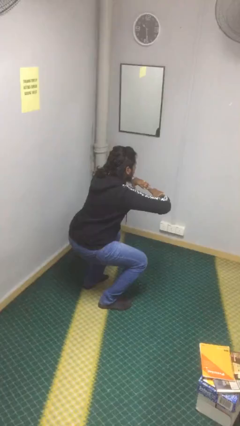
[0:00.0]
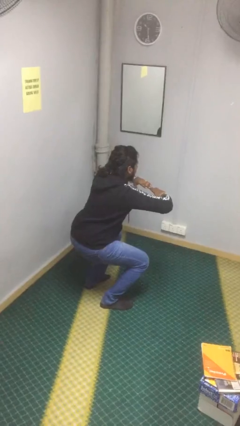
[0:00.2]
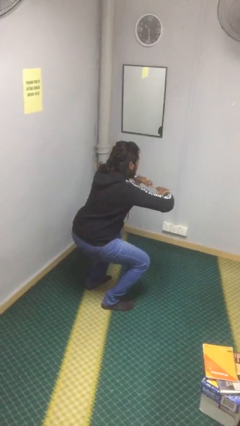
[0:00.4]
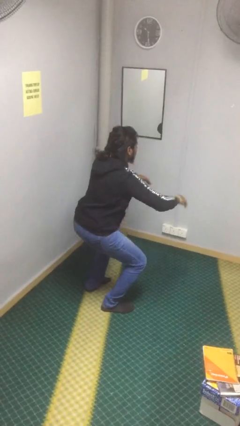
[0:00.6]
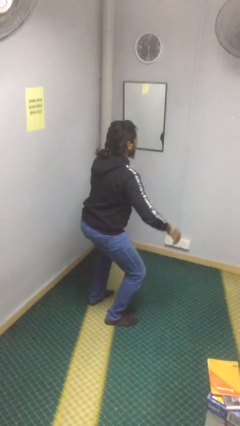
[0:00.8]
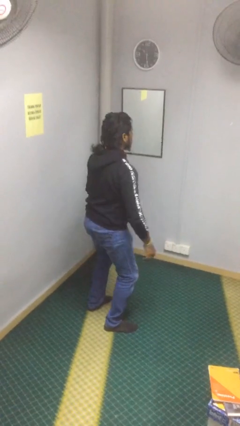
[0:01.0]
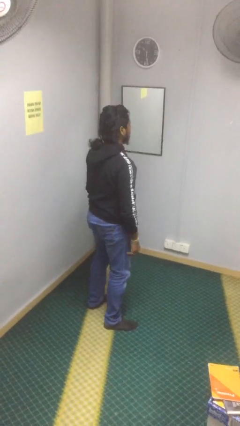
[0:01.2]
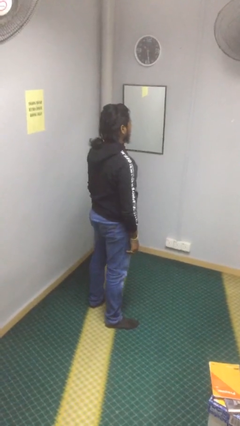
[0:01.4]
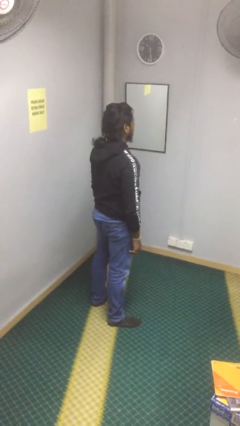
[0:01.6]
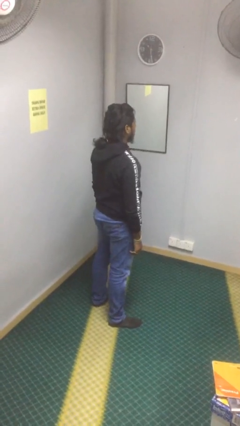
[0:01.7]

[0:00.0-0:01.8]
person stands up

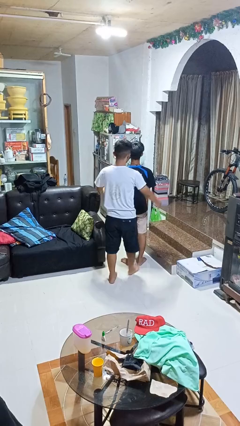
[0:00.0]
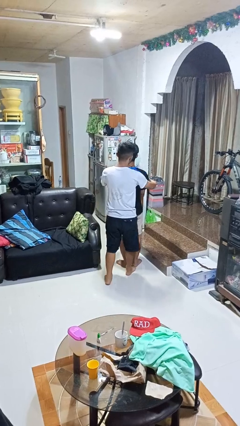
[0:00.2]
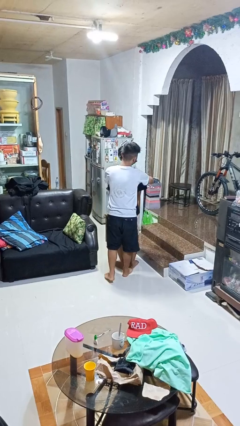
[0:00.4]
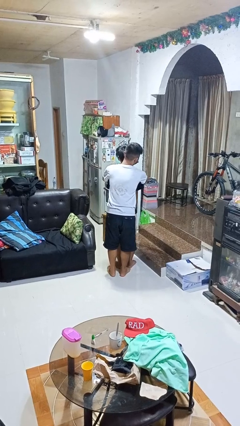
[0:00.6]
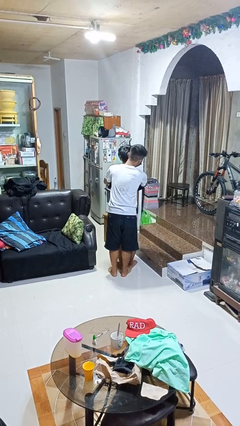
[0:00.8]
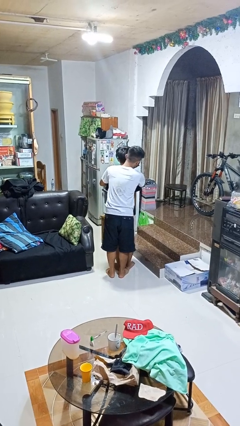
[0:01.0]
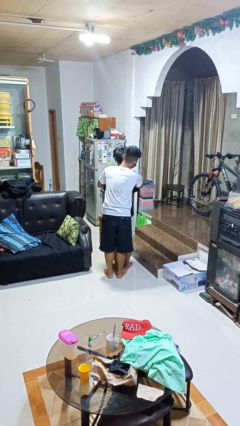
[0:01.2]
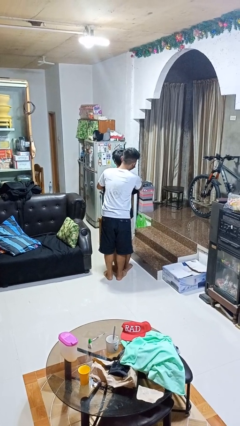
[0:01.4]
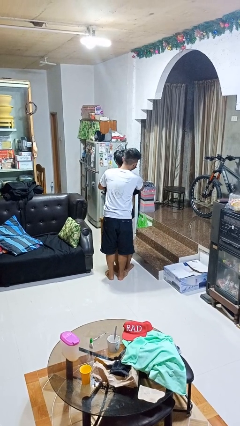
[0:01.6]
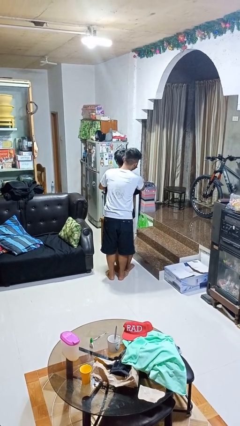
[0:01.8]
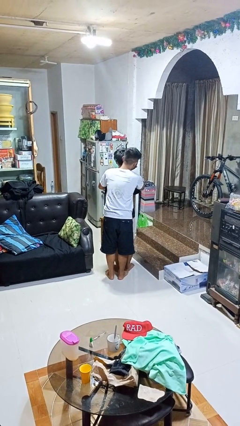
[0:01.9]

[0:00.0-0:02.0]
person hugs person from behind

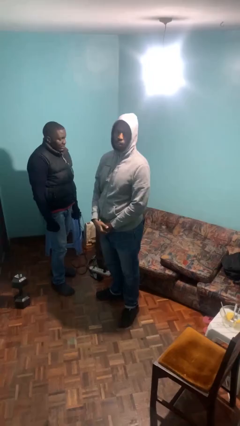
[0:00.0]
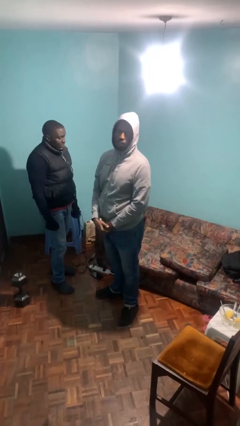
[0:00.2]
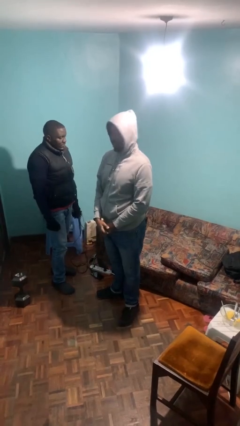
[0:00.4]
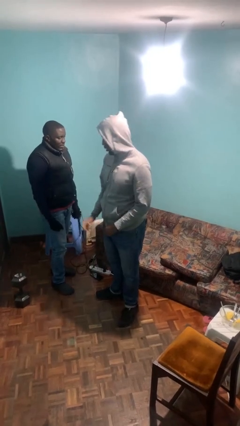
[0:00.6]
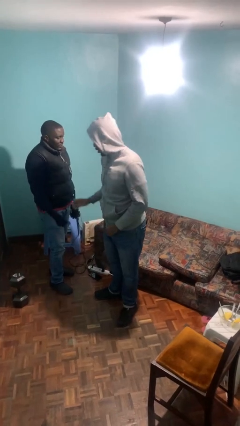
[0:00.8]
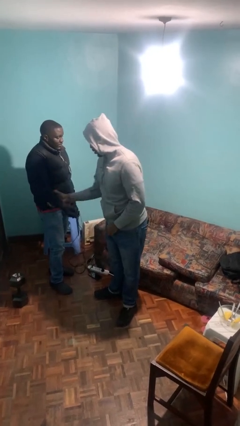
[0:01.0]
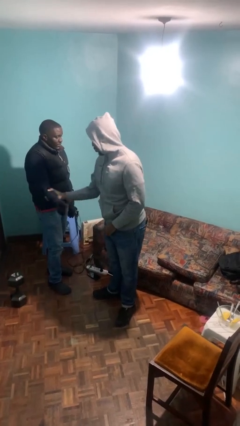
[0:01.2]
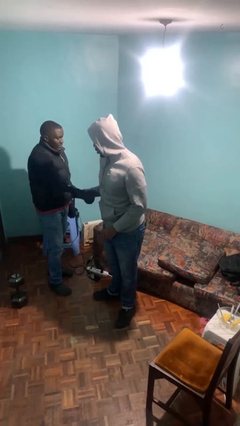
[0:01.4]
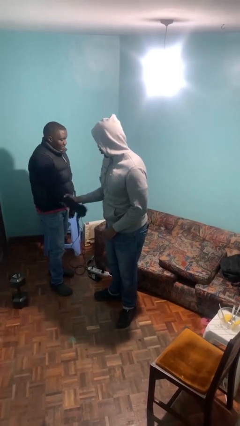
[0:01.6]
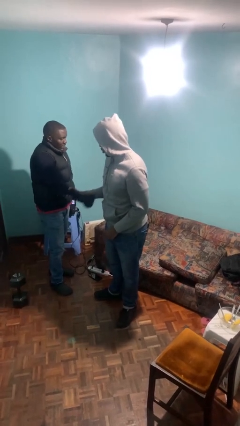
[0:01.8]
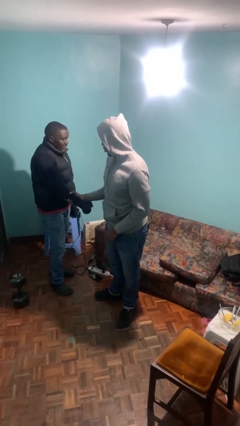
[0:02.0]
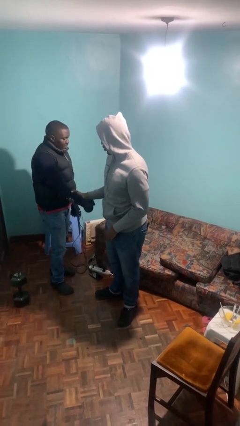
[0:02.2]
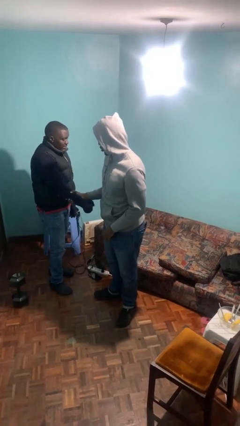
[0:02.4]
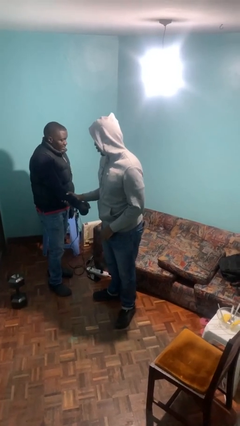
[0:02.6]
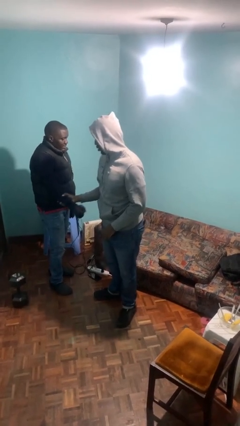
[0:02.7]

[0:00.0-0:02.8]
person grabs person by forearm

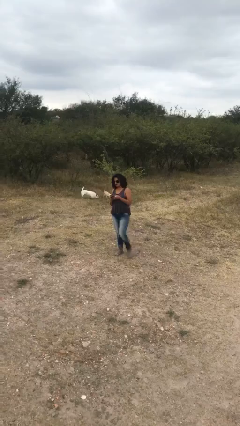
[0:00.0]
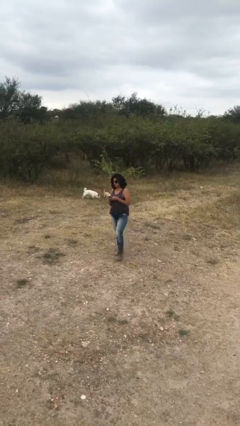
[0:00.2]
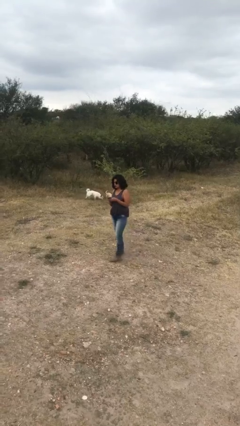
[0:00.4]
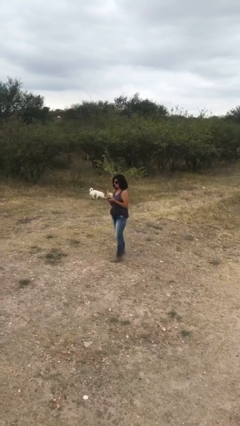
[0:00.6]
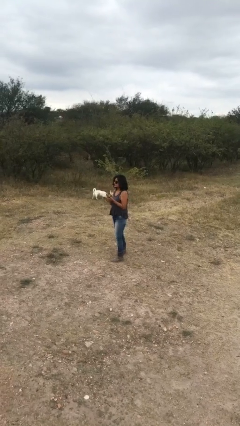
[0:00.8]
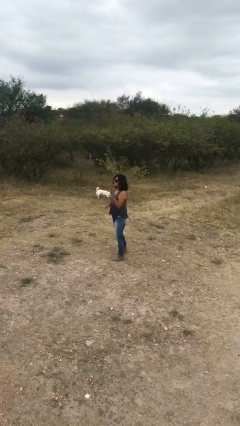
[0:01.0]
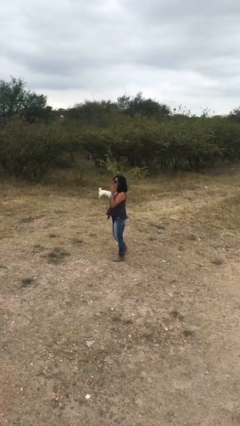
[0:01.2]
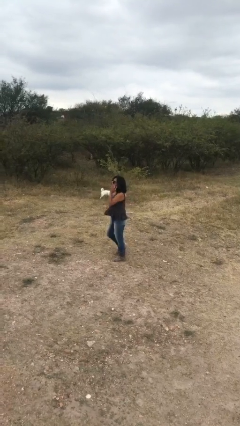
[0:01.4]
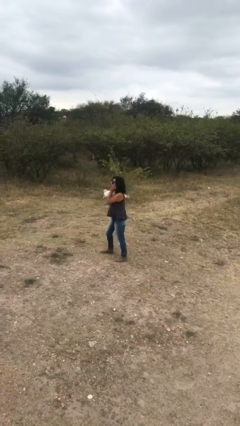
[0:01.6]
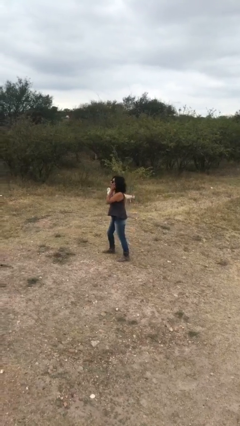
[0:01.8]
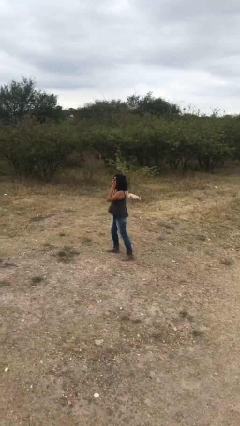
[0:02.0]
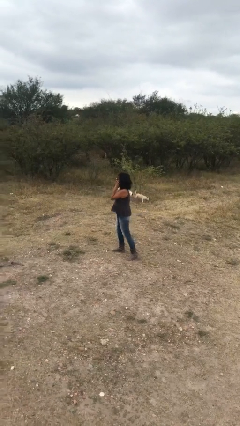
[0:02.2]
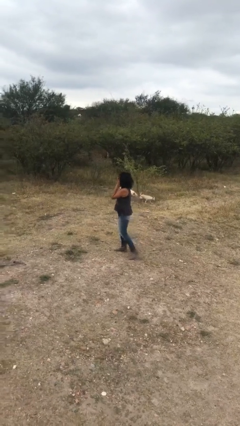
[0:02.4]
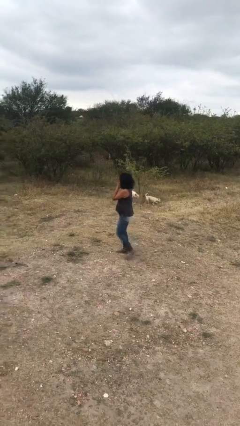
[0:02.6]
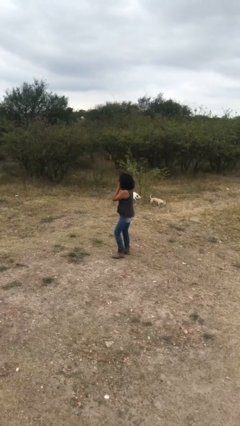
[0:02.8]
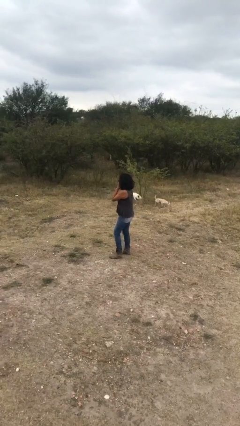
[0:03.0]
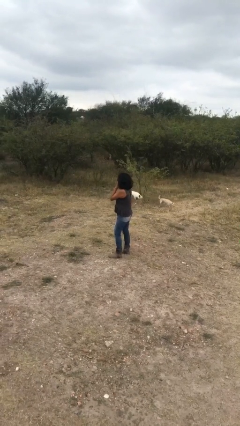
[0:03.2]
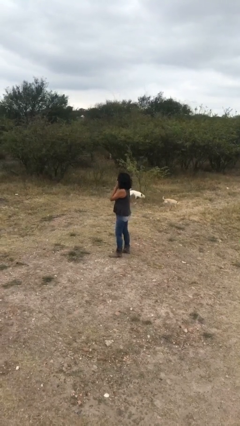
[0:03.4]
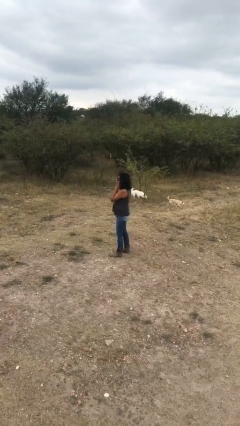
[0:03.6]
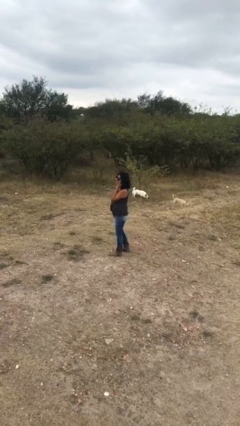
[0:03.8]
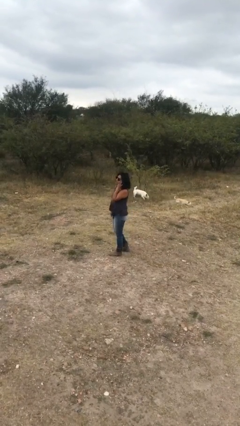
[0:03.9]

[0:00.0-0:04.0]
person talks on phone

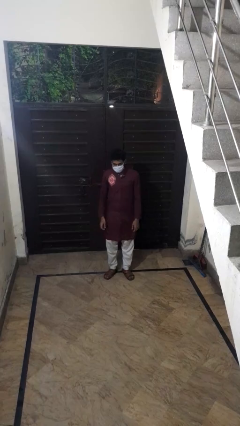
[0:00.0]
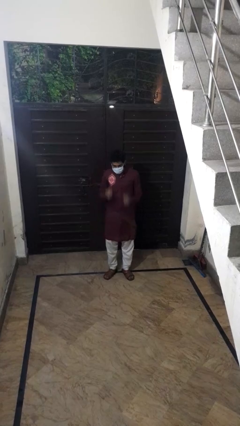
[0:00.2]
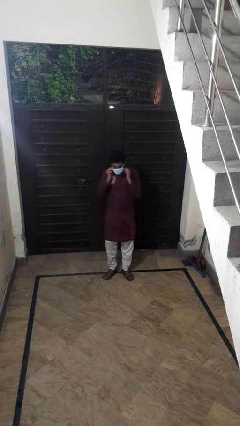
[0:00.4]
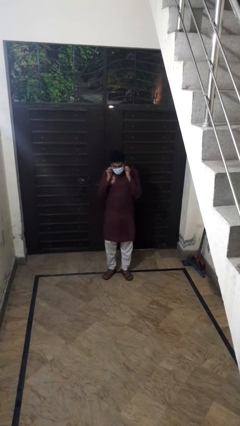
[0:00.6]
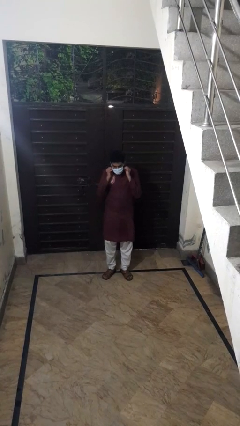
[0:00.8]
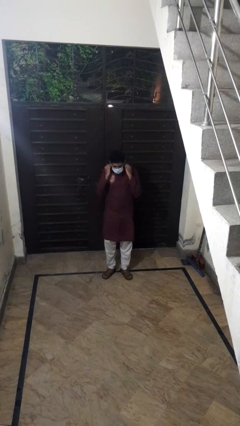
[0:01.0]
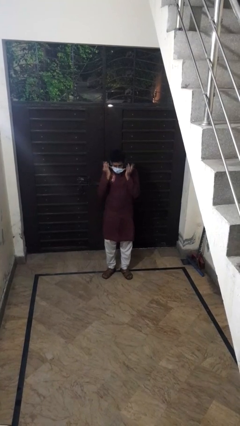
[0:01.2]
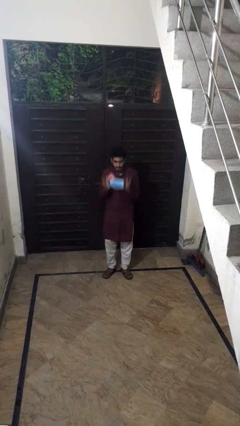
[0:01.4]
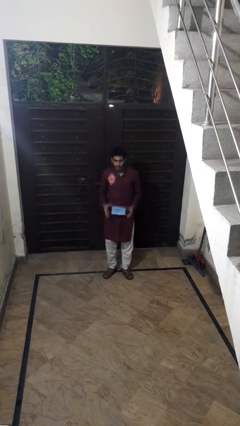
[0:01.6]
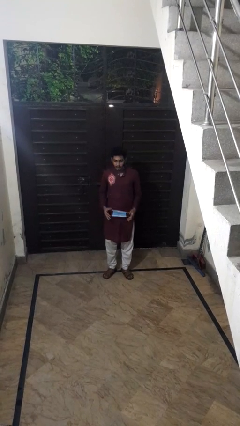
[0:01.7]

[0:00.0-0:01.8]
person takes off facemask

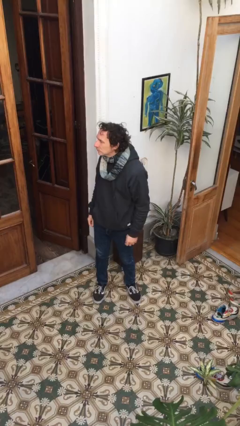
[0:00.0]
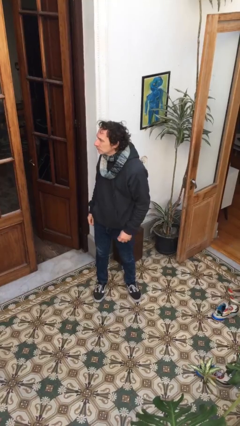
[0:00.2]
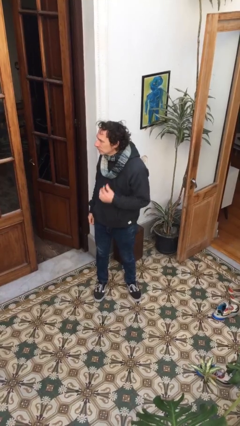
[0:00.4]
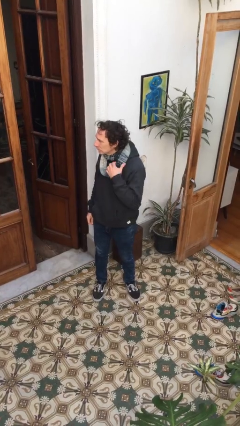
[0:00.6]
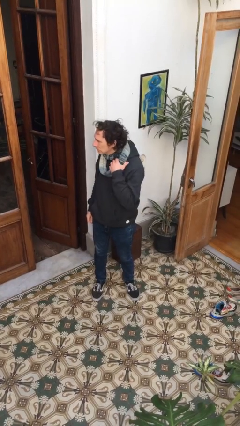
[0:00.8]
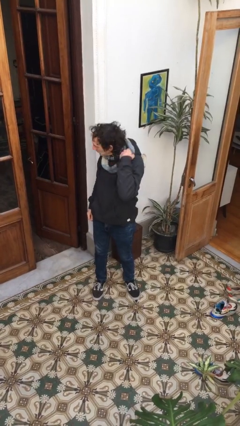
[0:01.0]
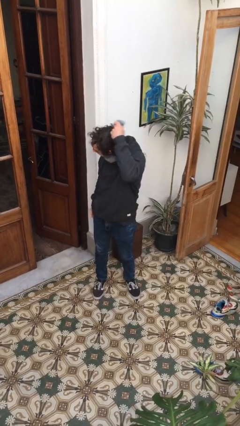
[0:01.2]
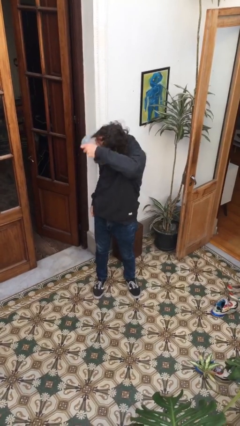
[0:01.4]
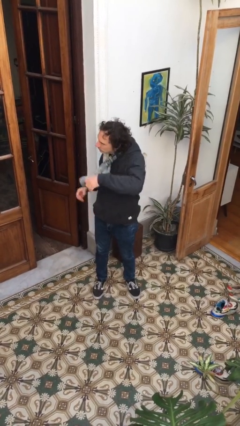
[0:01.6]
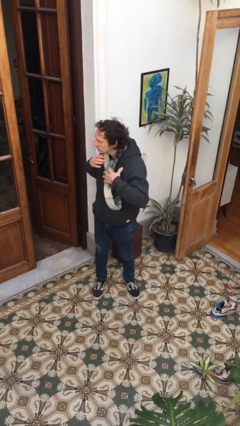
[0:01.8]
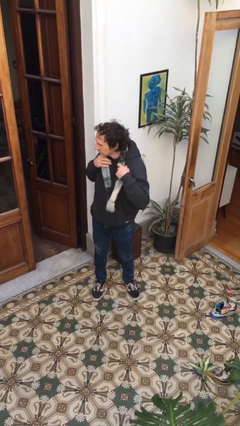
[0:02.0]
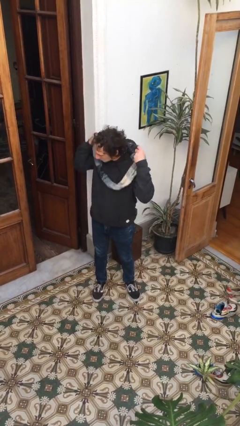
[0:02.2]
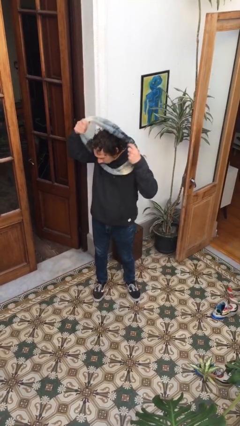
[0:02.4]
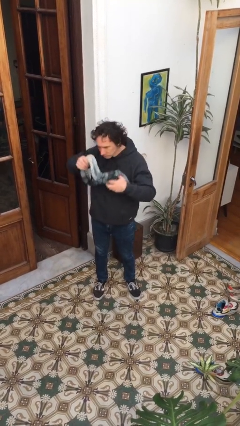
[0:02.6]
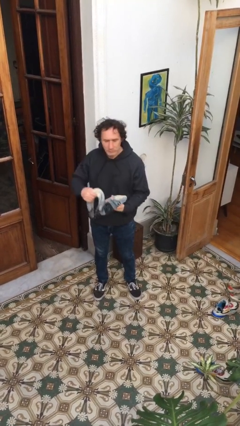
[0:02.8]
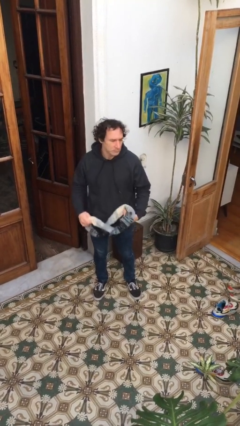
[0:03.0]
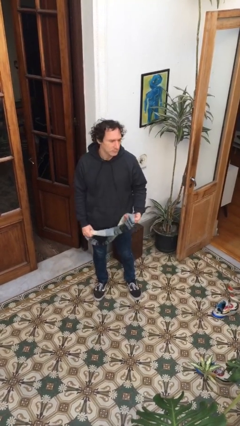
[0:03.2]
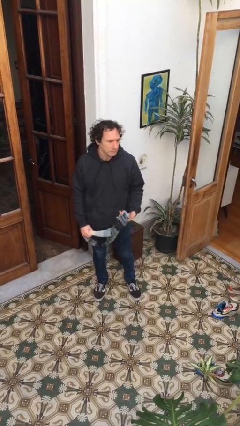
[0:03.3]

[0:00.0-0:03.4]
person takes off scarf

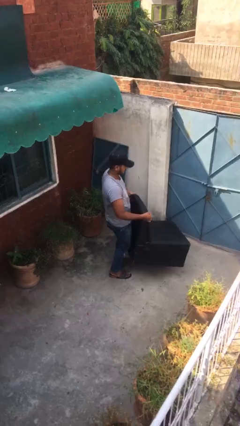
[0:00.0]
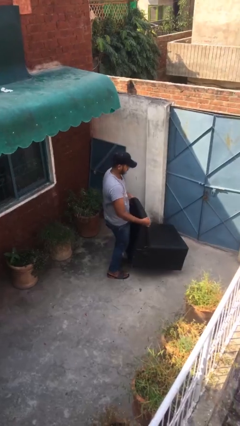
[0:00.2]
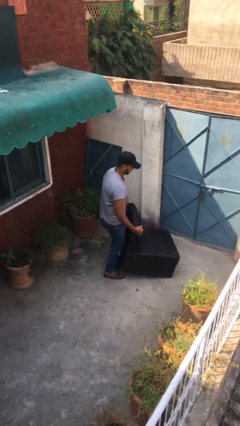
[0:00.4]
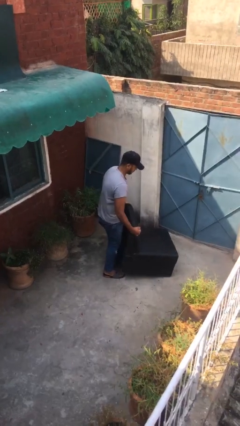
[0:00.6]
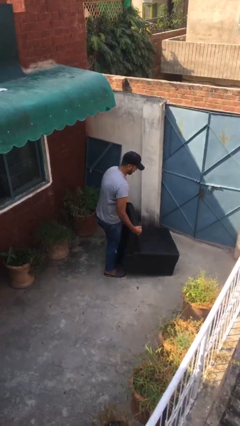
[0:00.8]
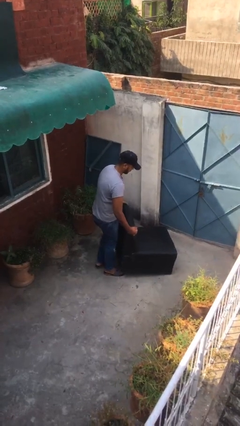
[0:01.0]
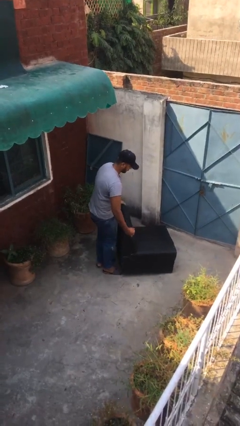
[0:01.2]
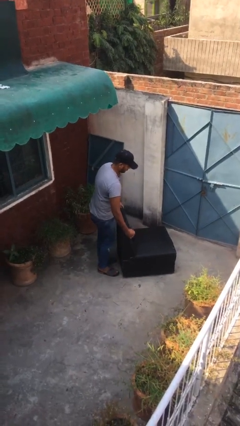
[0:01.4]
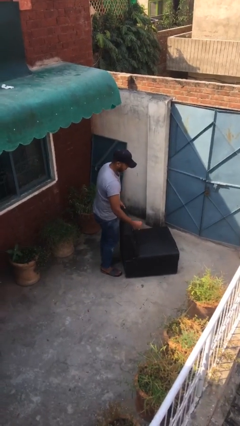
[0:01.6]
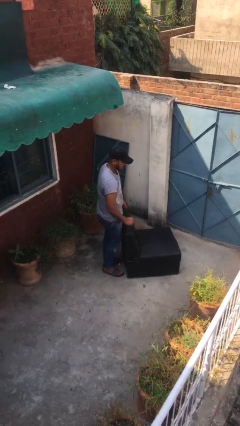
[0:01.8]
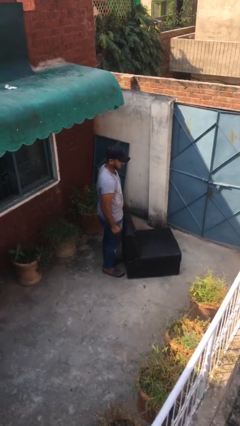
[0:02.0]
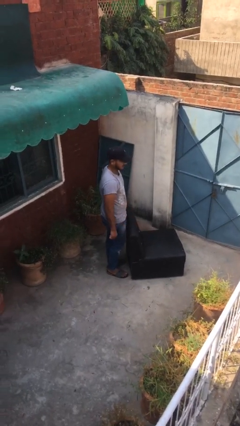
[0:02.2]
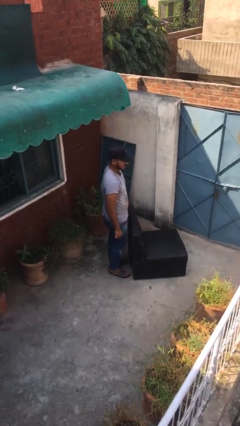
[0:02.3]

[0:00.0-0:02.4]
person puts down object on floor
